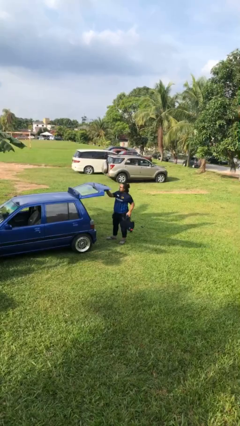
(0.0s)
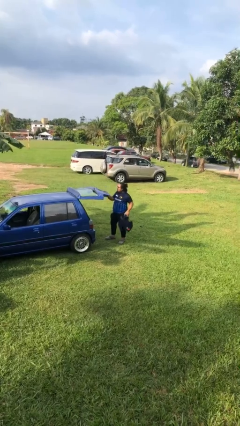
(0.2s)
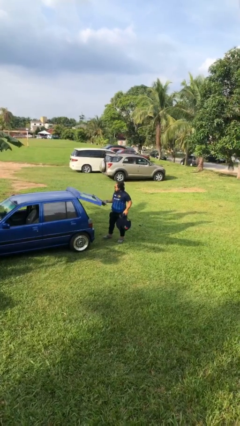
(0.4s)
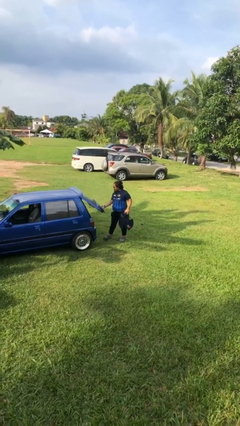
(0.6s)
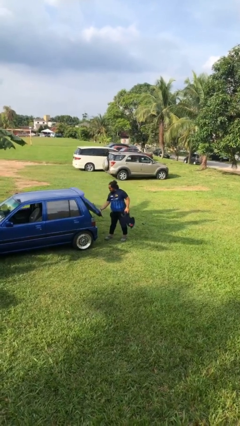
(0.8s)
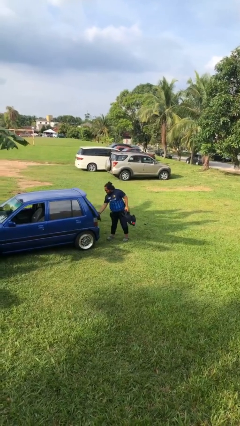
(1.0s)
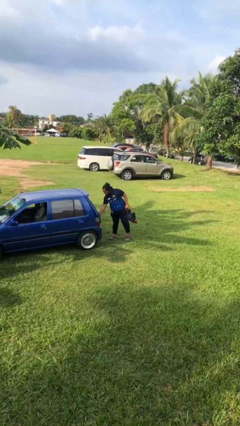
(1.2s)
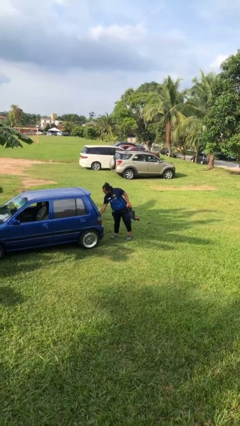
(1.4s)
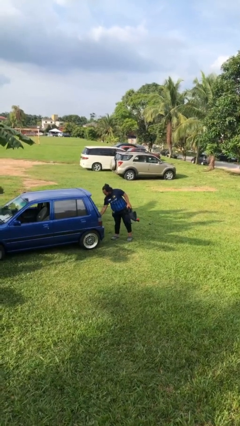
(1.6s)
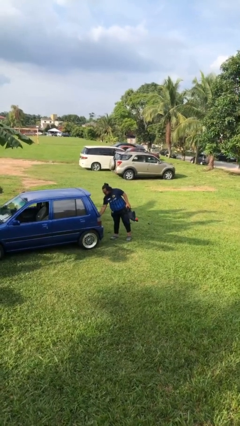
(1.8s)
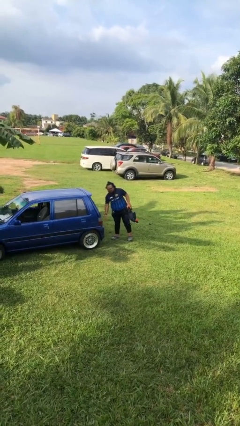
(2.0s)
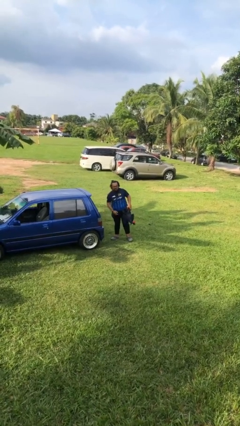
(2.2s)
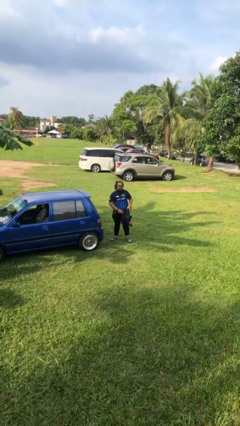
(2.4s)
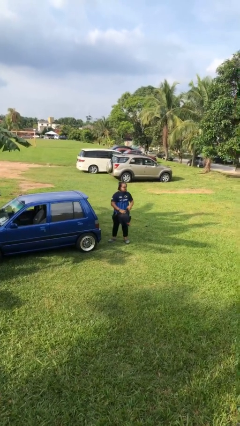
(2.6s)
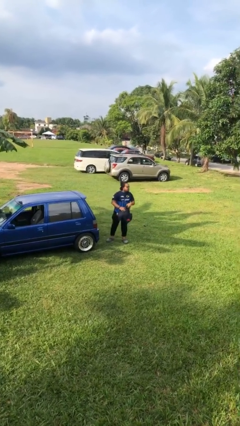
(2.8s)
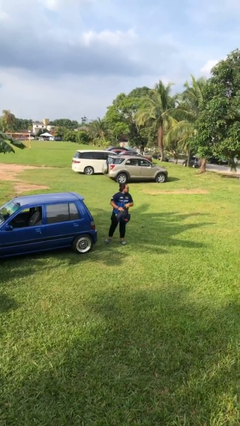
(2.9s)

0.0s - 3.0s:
person closes car trunk

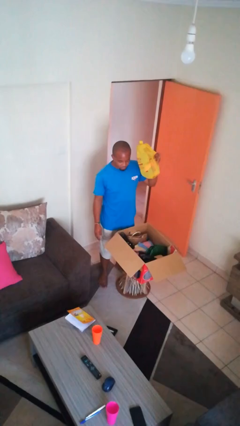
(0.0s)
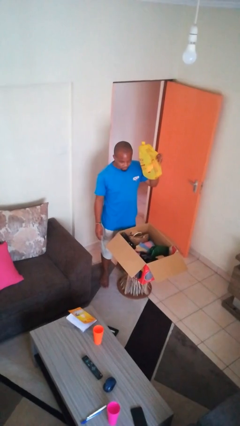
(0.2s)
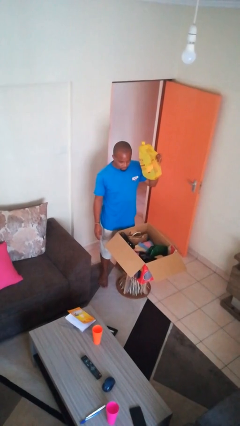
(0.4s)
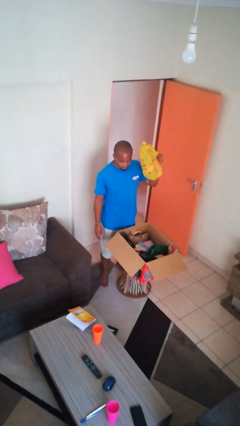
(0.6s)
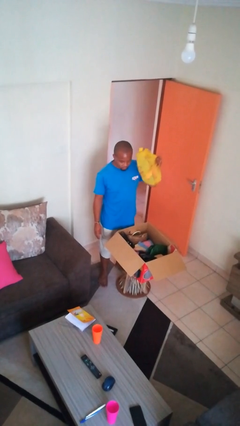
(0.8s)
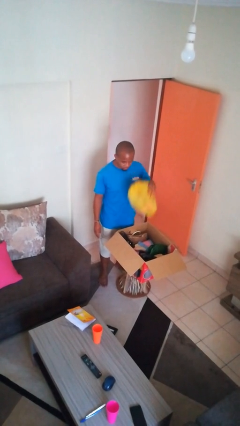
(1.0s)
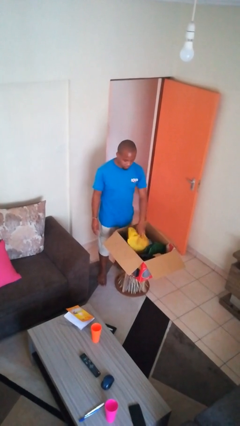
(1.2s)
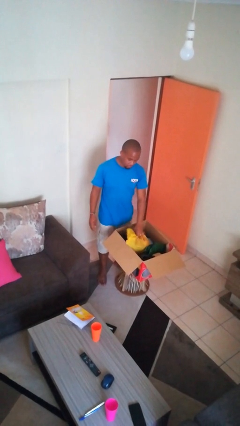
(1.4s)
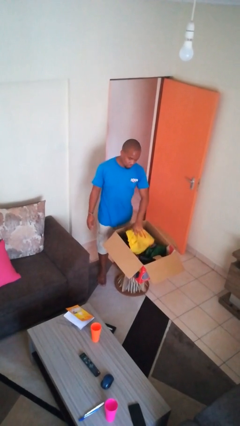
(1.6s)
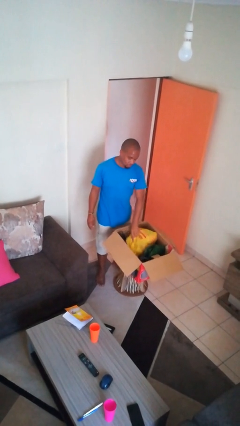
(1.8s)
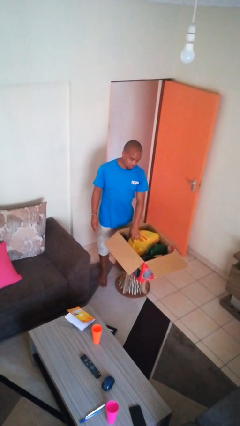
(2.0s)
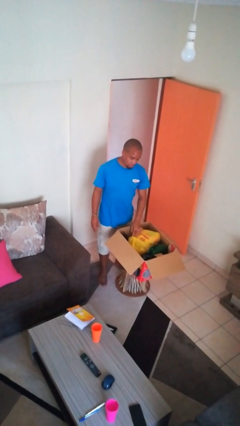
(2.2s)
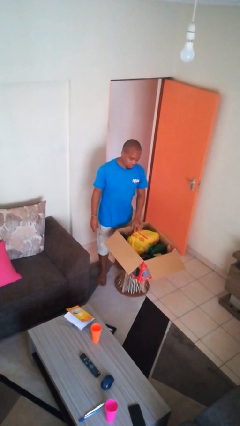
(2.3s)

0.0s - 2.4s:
person puts object into box

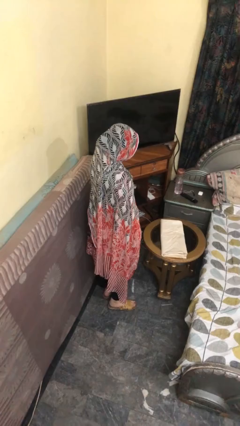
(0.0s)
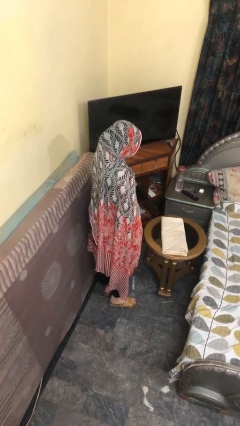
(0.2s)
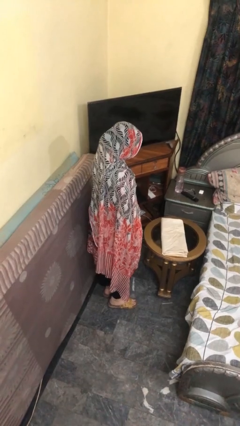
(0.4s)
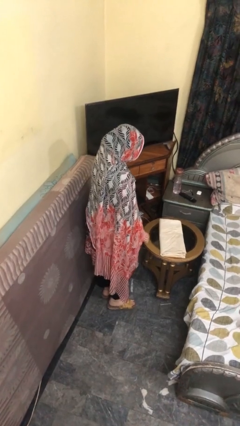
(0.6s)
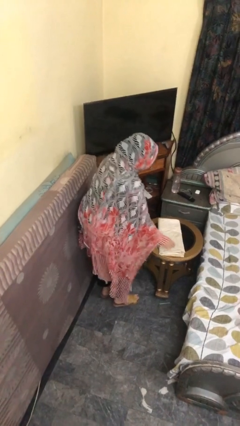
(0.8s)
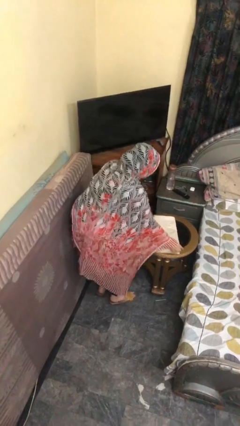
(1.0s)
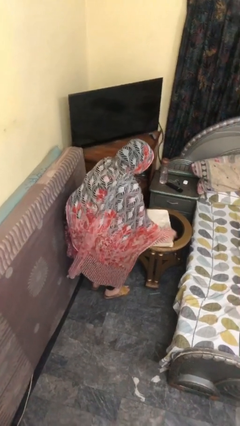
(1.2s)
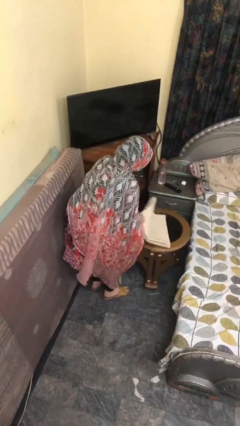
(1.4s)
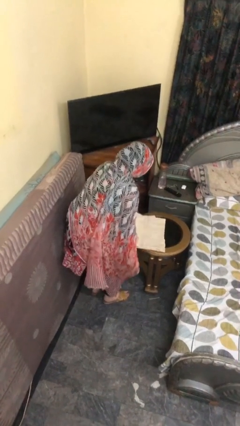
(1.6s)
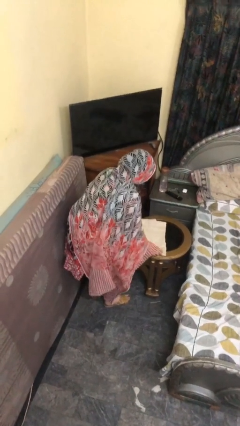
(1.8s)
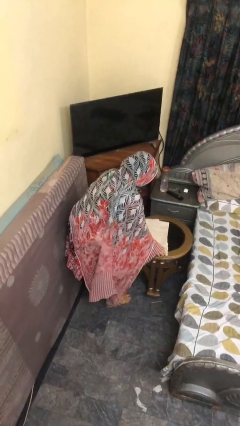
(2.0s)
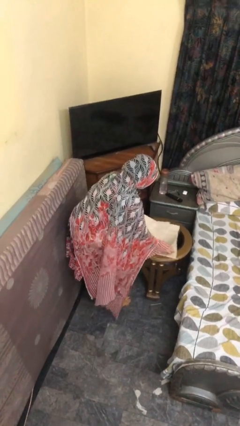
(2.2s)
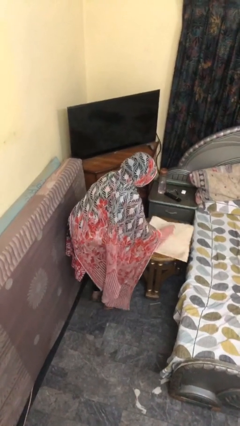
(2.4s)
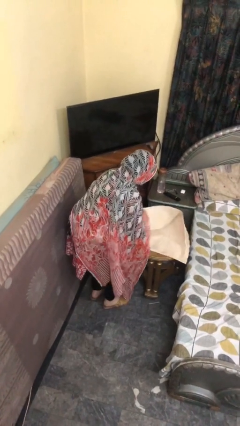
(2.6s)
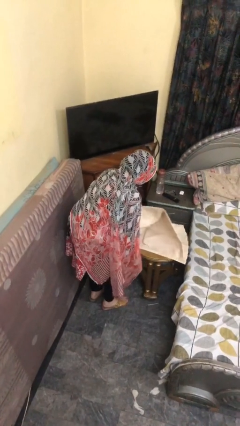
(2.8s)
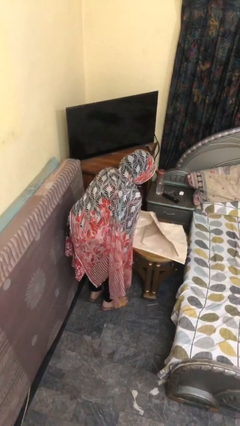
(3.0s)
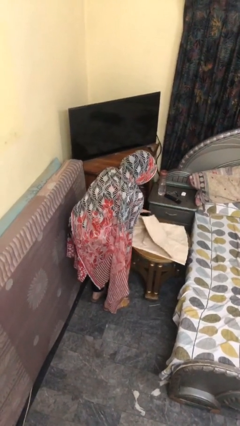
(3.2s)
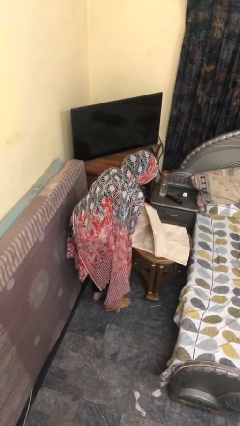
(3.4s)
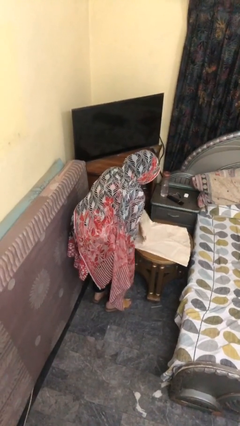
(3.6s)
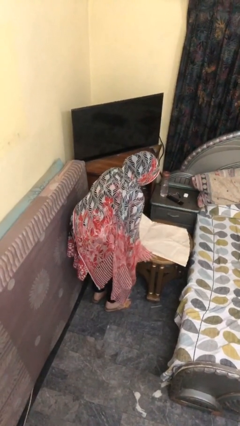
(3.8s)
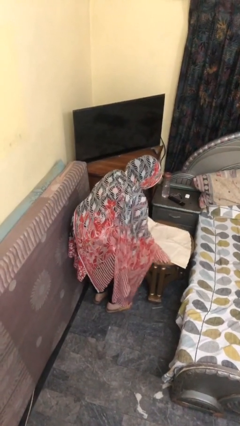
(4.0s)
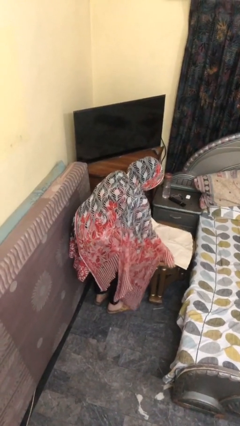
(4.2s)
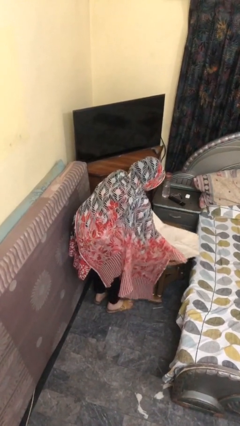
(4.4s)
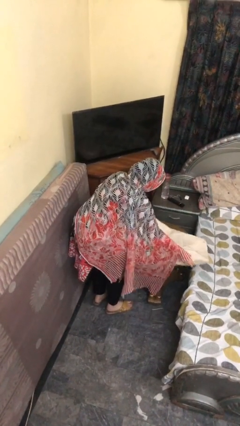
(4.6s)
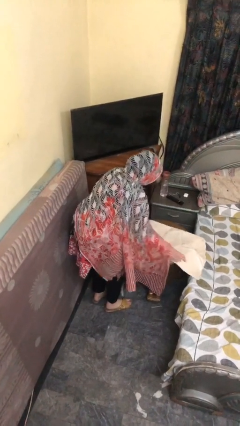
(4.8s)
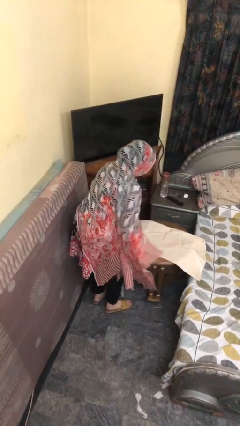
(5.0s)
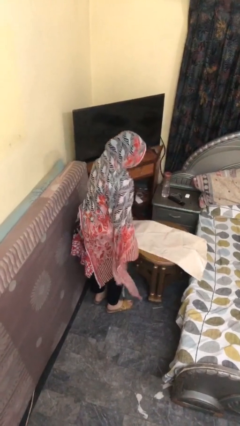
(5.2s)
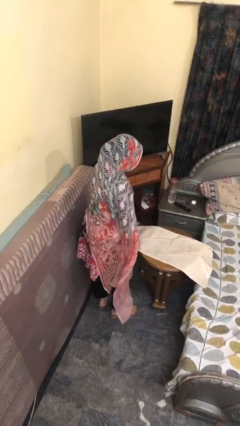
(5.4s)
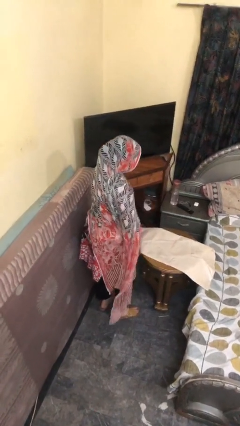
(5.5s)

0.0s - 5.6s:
person spreads tablecloth

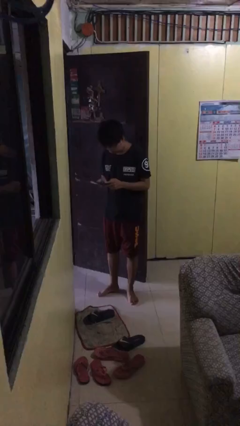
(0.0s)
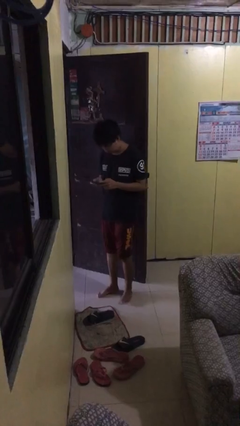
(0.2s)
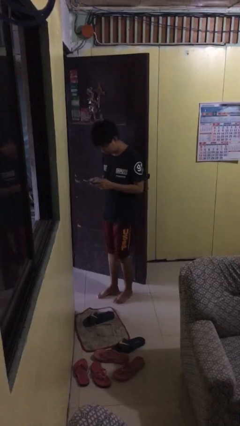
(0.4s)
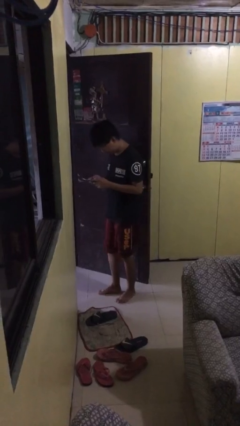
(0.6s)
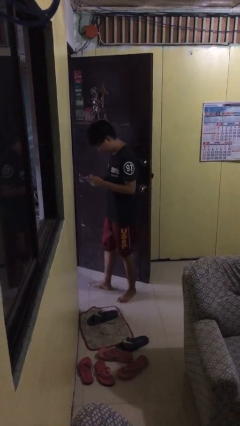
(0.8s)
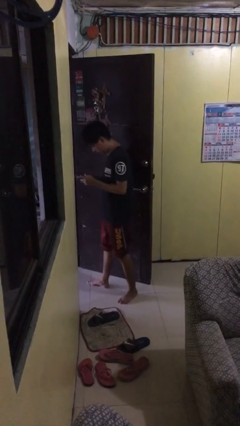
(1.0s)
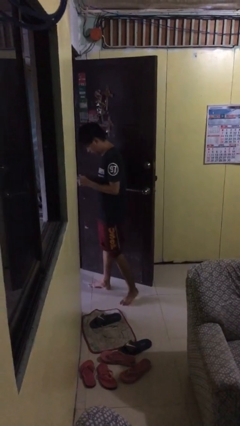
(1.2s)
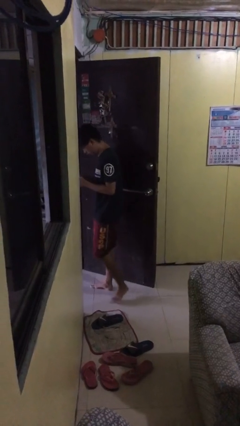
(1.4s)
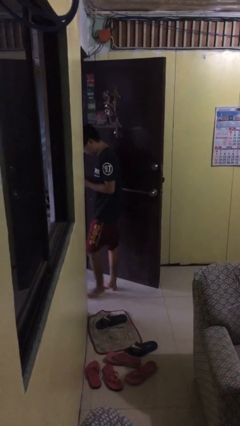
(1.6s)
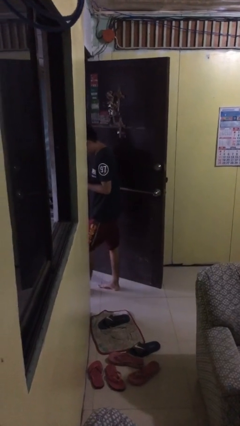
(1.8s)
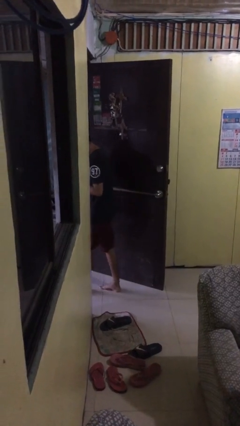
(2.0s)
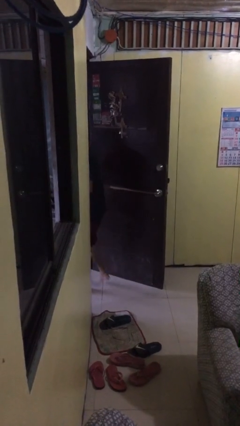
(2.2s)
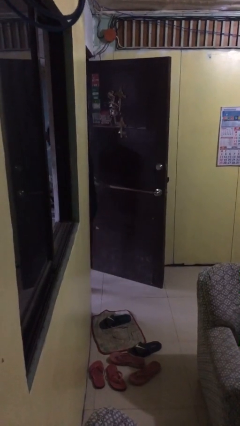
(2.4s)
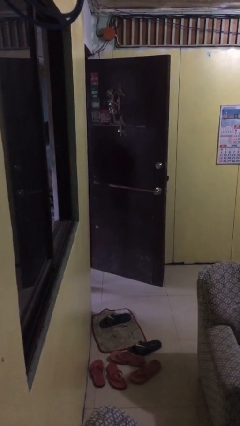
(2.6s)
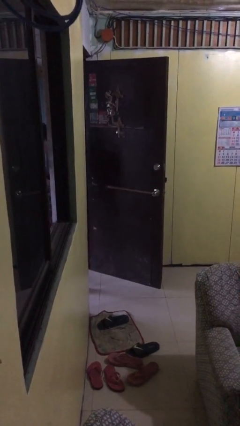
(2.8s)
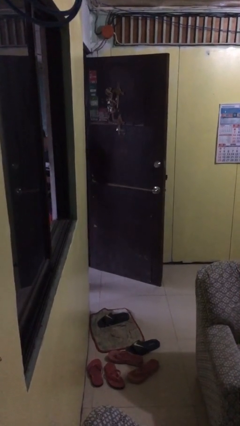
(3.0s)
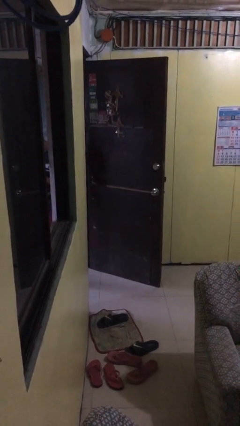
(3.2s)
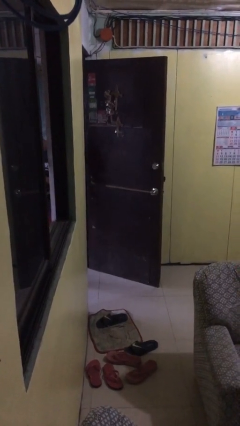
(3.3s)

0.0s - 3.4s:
person exits scene through structure

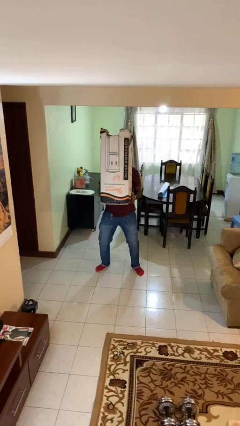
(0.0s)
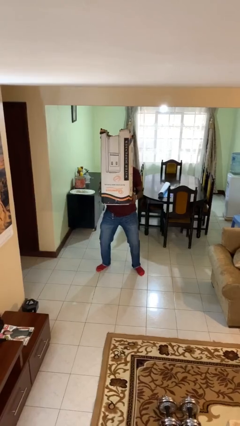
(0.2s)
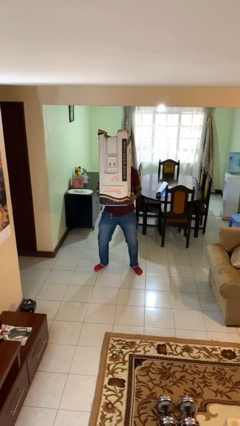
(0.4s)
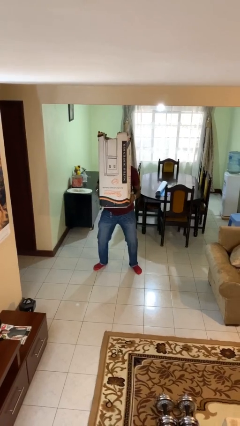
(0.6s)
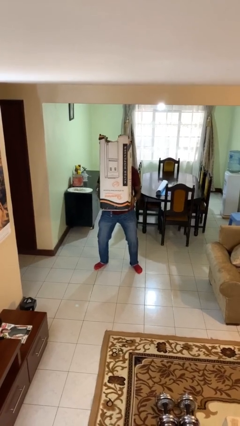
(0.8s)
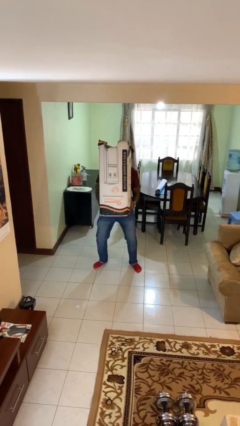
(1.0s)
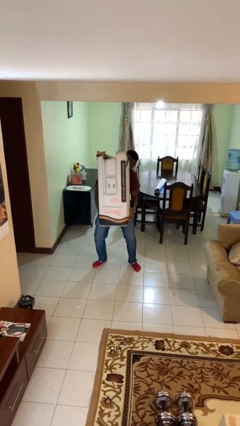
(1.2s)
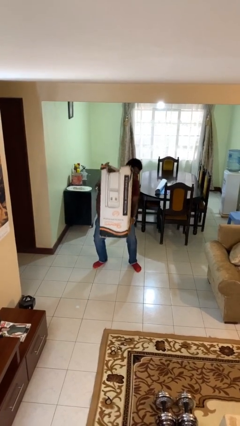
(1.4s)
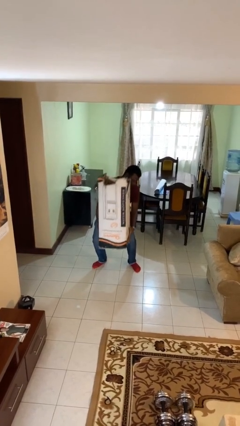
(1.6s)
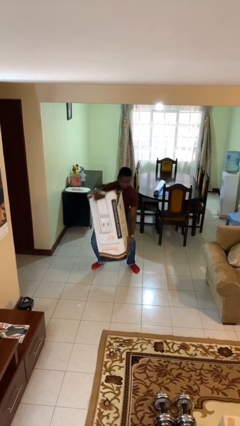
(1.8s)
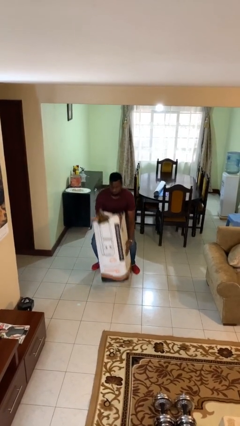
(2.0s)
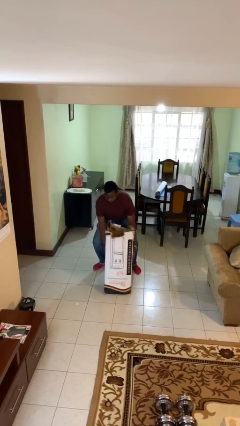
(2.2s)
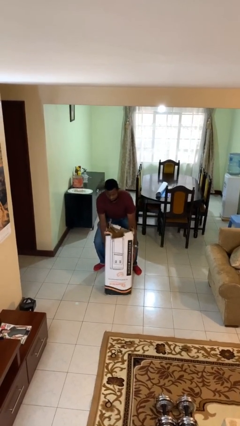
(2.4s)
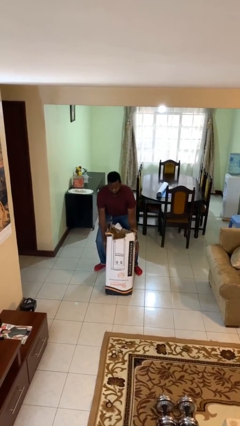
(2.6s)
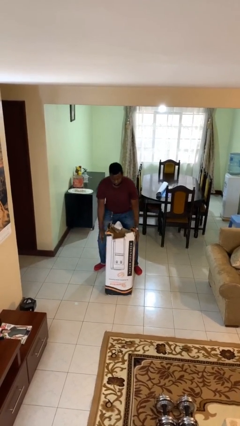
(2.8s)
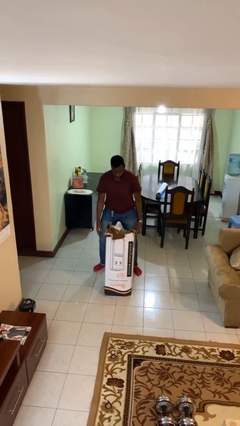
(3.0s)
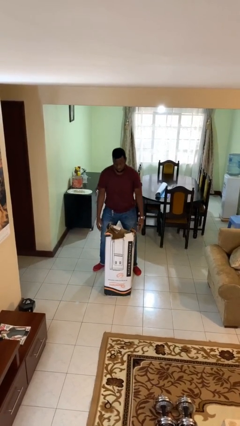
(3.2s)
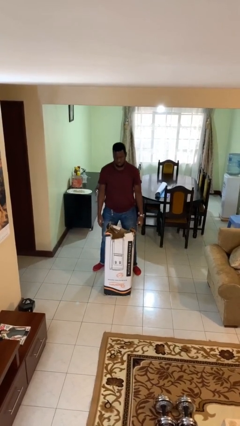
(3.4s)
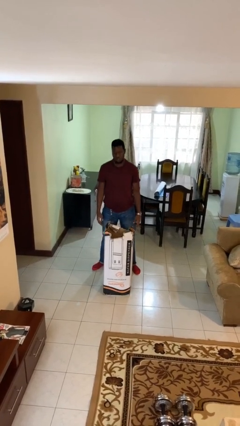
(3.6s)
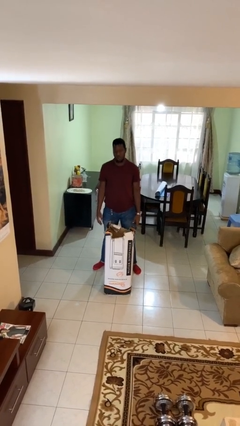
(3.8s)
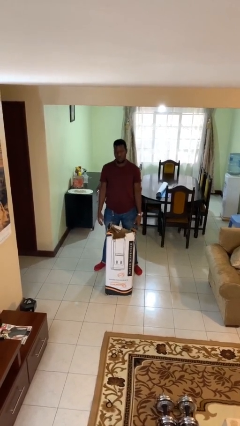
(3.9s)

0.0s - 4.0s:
person puts down object on floor
